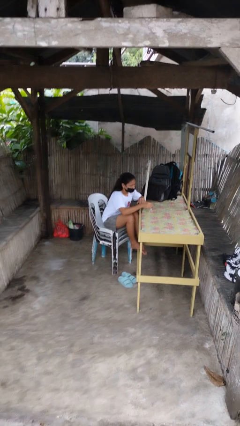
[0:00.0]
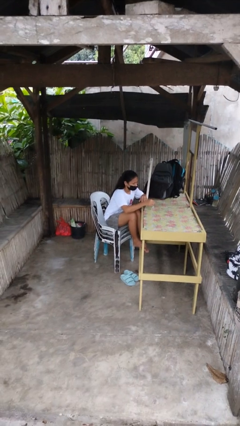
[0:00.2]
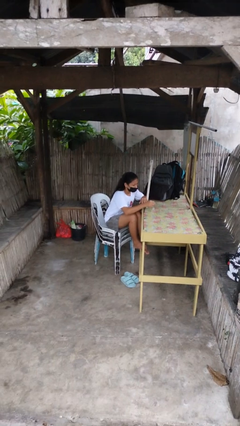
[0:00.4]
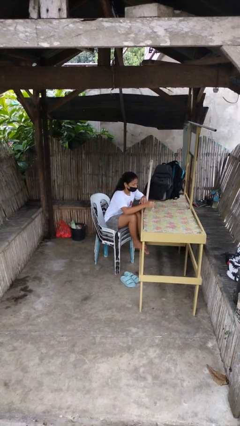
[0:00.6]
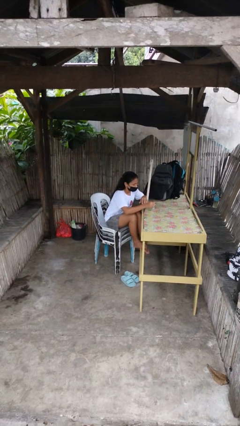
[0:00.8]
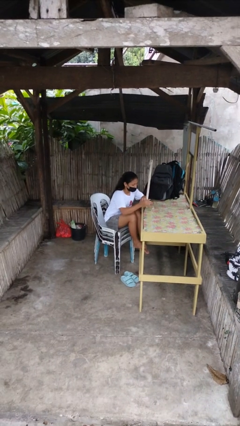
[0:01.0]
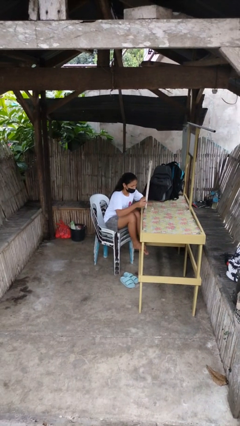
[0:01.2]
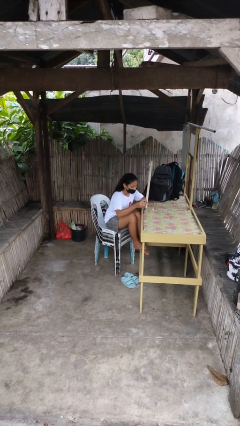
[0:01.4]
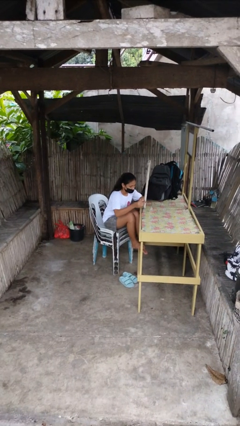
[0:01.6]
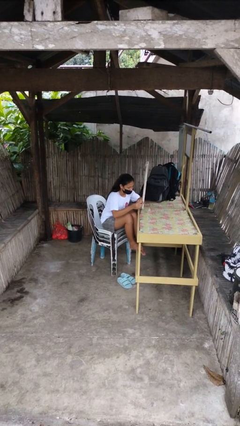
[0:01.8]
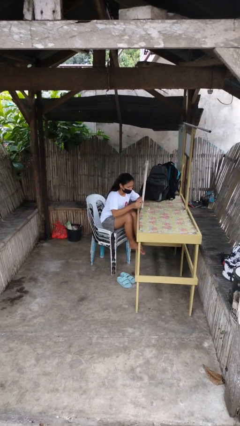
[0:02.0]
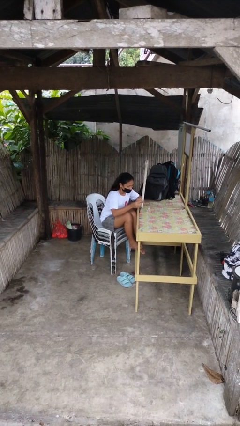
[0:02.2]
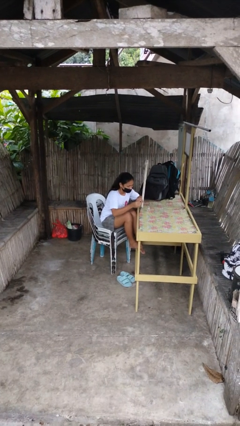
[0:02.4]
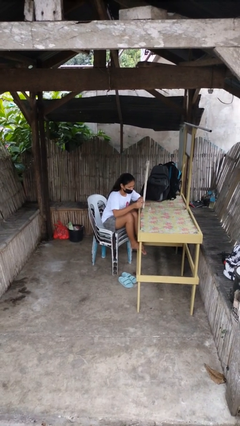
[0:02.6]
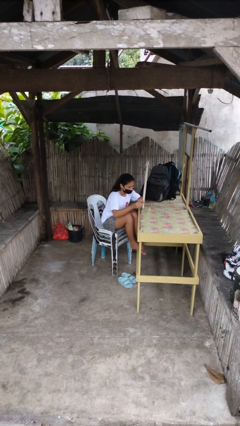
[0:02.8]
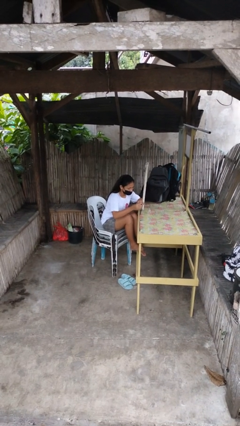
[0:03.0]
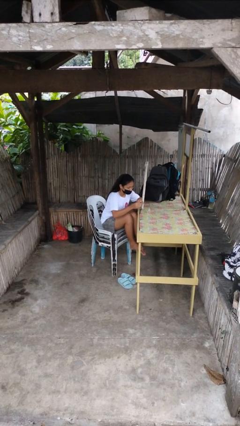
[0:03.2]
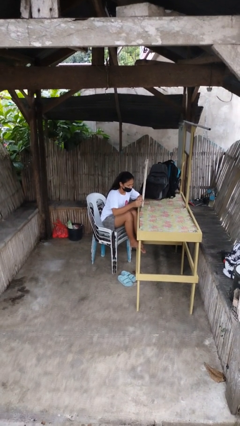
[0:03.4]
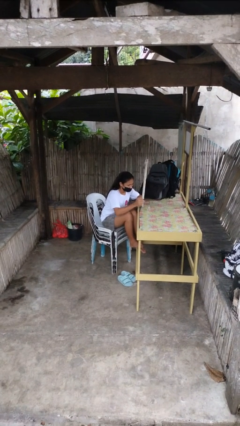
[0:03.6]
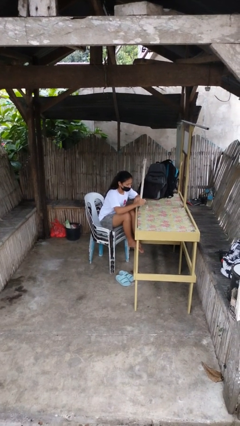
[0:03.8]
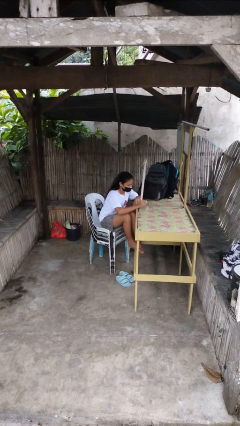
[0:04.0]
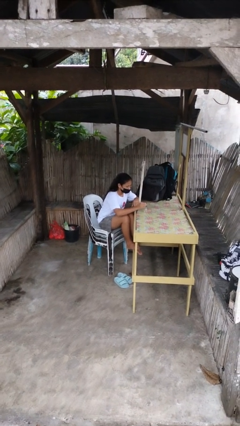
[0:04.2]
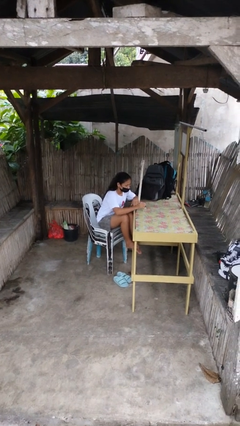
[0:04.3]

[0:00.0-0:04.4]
person paints fingernails

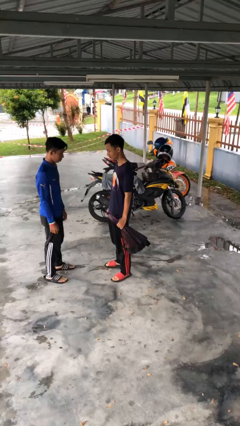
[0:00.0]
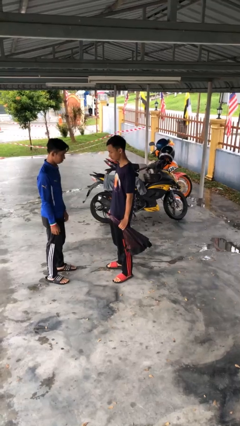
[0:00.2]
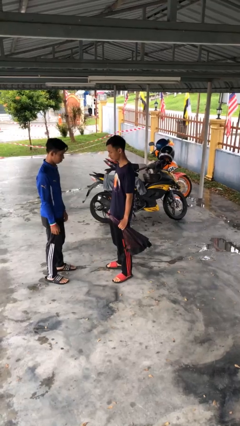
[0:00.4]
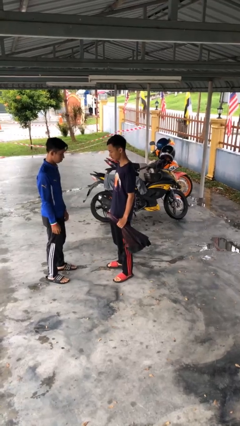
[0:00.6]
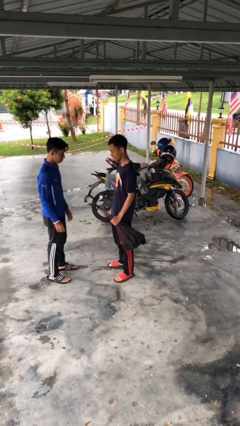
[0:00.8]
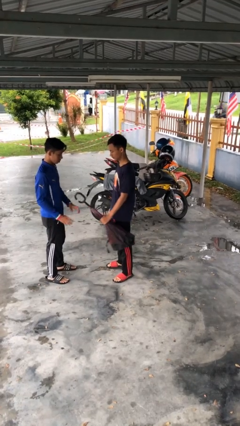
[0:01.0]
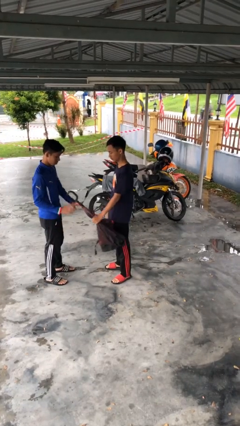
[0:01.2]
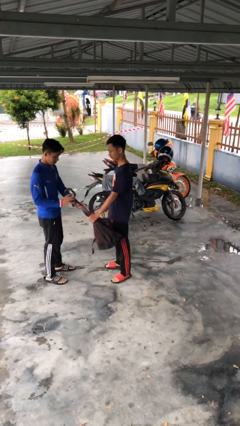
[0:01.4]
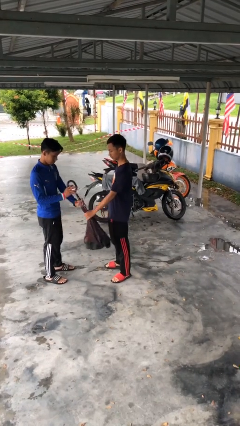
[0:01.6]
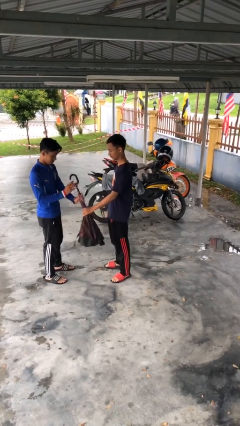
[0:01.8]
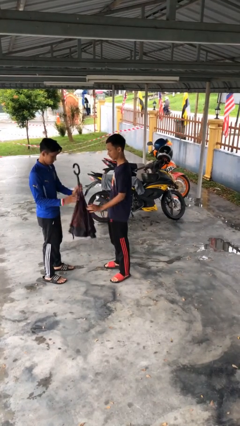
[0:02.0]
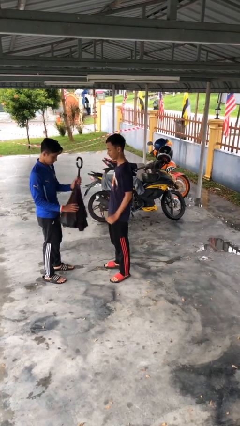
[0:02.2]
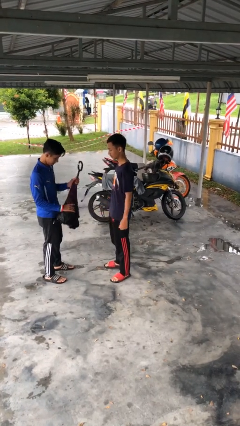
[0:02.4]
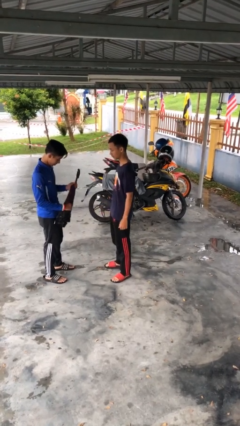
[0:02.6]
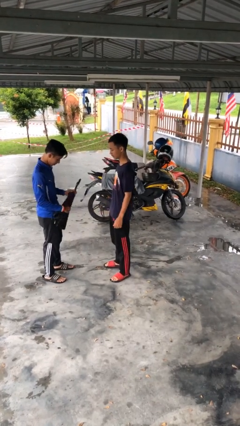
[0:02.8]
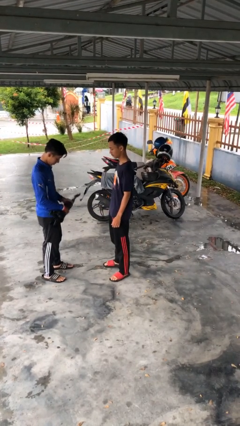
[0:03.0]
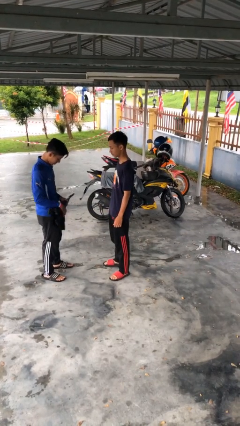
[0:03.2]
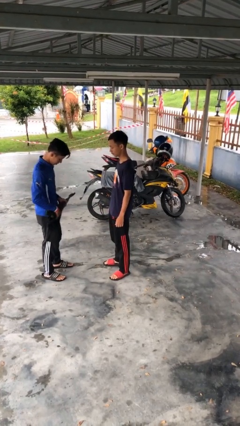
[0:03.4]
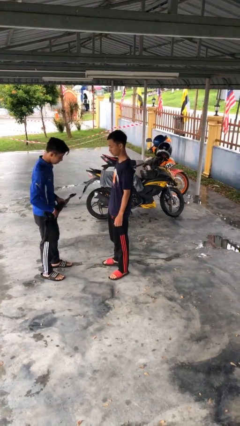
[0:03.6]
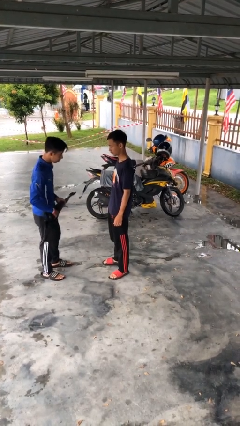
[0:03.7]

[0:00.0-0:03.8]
person transfers object to person

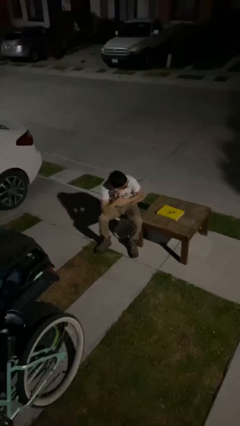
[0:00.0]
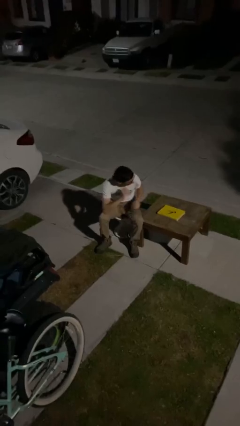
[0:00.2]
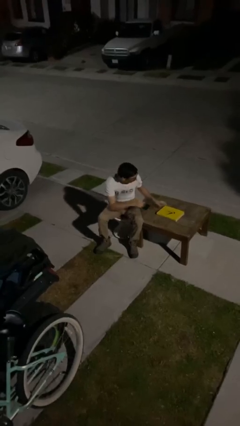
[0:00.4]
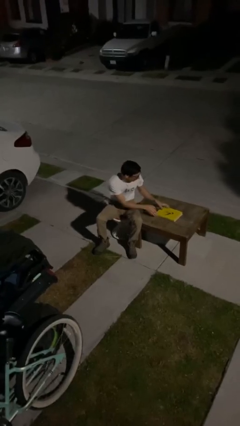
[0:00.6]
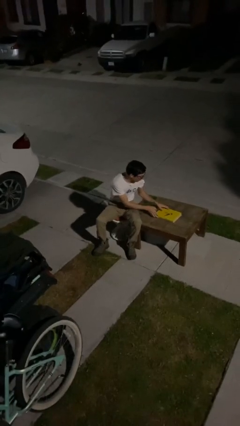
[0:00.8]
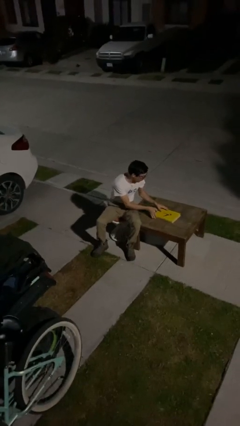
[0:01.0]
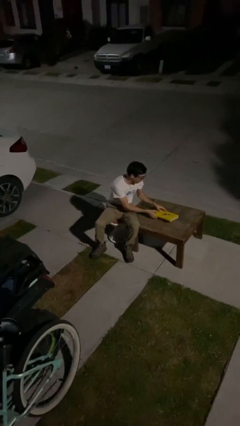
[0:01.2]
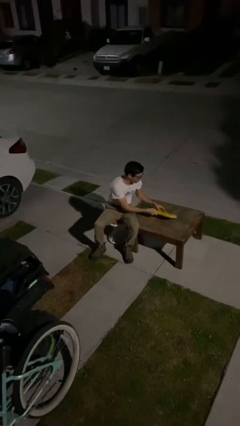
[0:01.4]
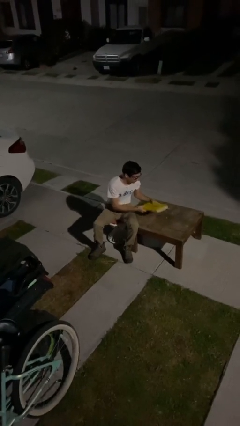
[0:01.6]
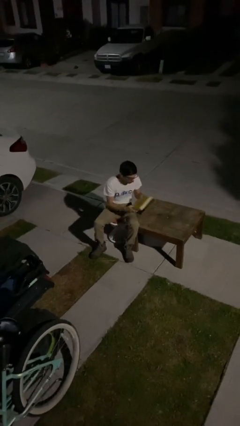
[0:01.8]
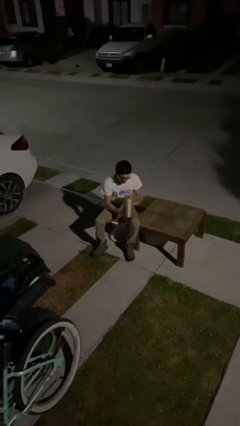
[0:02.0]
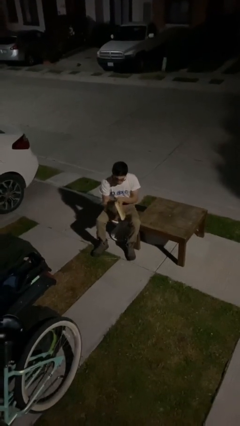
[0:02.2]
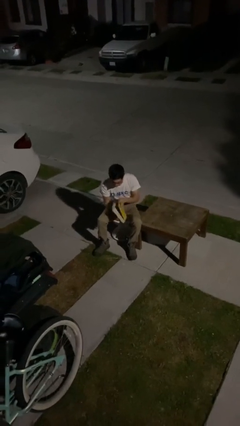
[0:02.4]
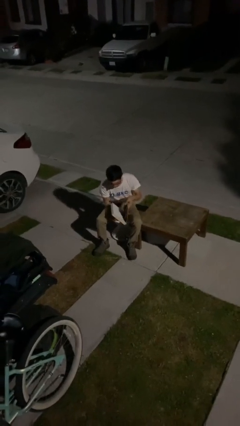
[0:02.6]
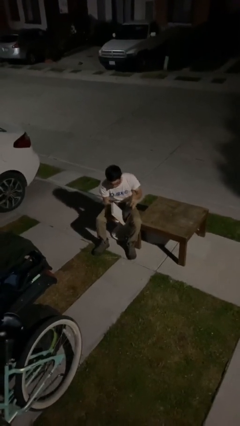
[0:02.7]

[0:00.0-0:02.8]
person picks up object from table

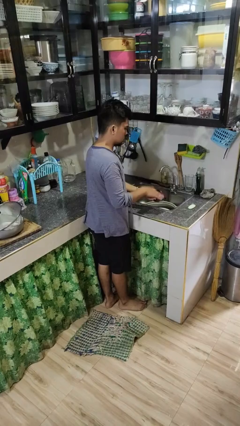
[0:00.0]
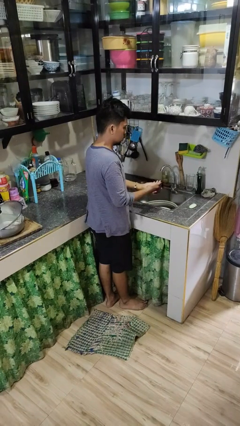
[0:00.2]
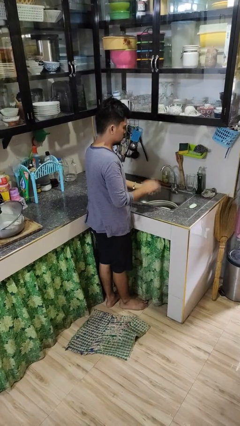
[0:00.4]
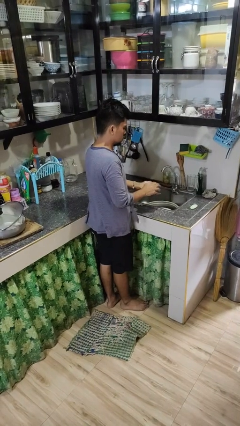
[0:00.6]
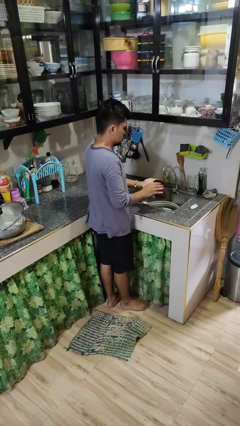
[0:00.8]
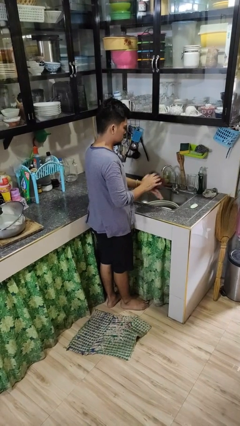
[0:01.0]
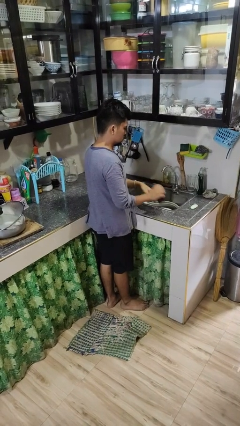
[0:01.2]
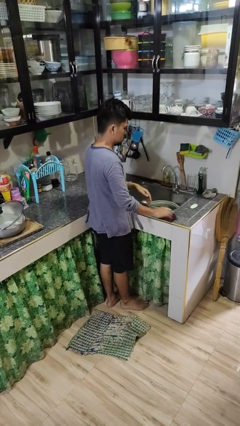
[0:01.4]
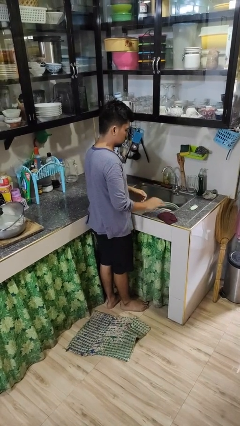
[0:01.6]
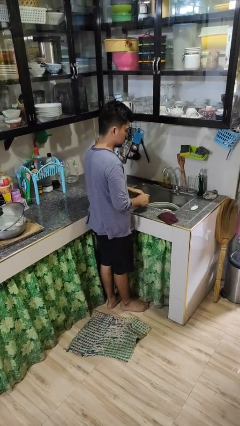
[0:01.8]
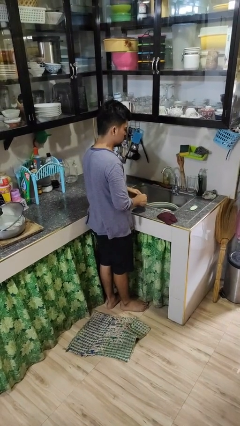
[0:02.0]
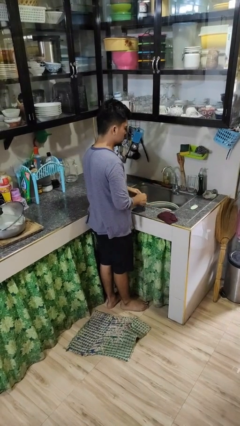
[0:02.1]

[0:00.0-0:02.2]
person dries hands with towel

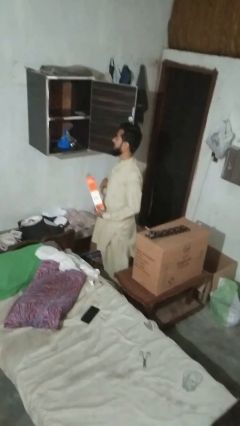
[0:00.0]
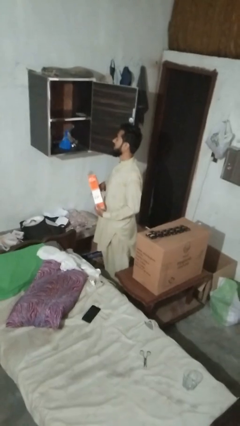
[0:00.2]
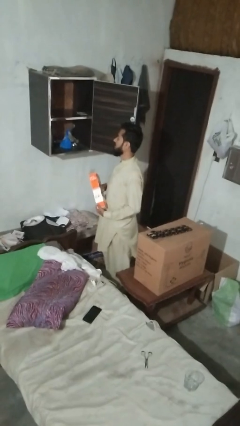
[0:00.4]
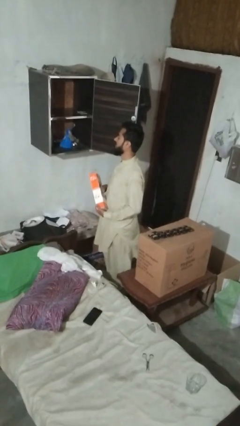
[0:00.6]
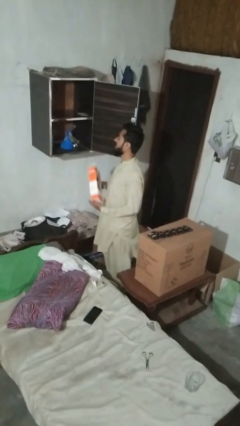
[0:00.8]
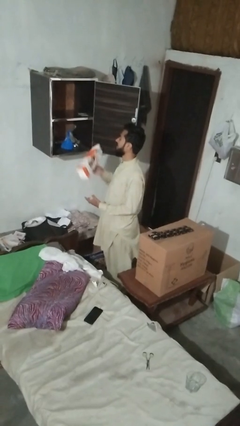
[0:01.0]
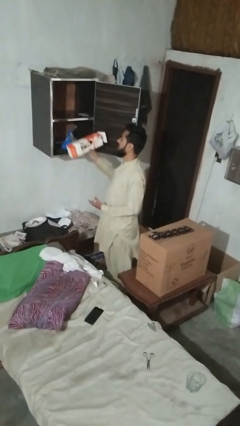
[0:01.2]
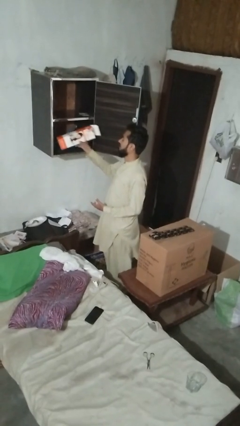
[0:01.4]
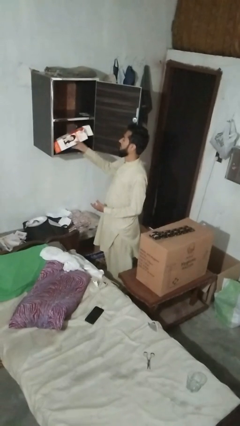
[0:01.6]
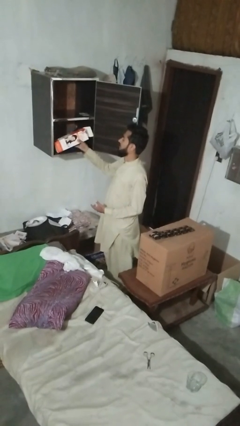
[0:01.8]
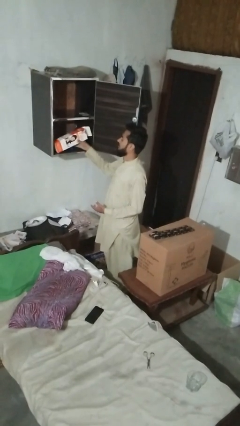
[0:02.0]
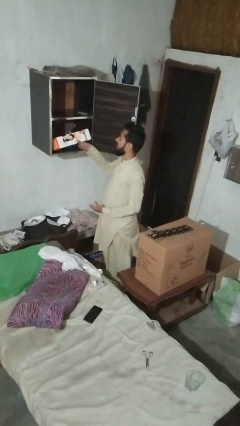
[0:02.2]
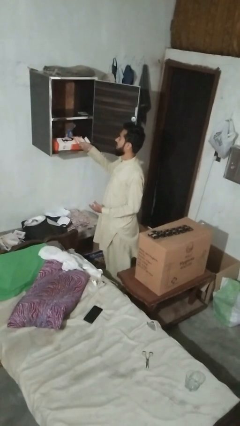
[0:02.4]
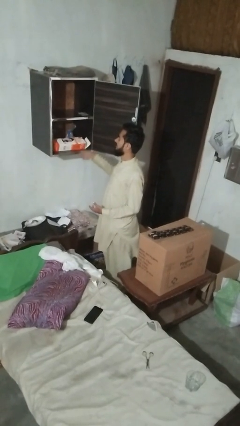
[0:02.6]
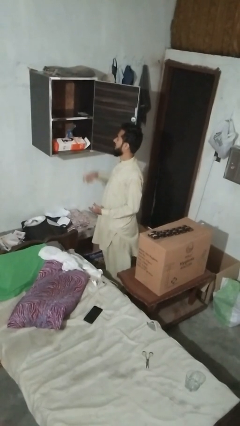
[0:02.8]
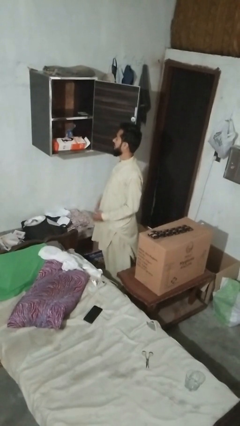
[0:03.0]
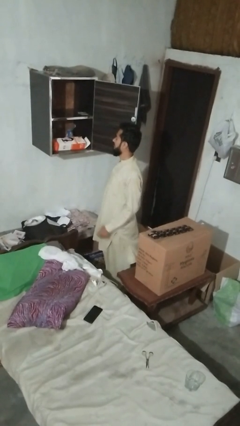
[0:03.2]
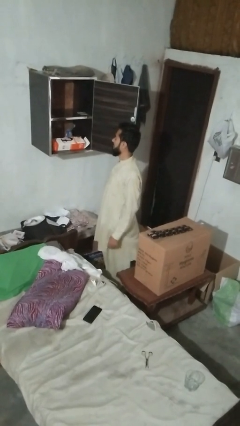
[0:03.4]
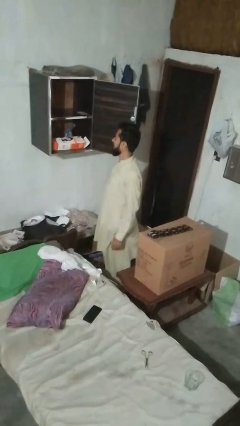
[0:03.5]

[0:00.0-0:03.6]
person puts down object into cabinet

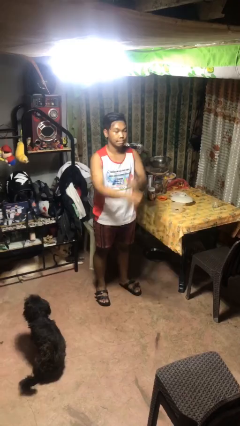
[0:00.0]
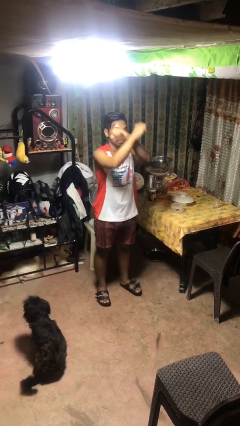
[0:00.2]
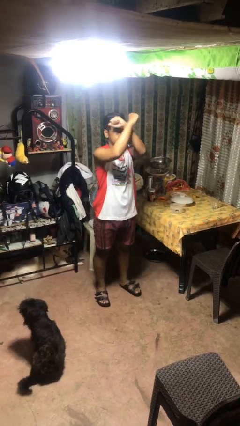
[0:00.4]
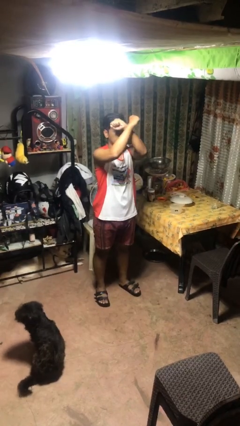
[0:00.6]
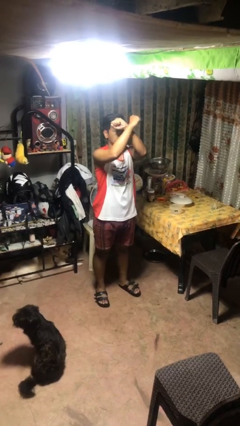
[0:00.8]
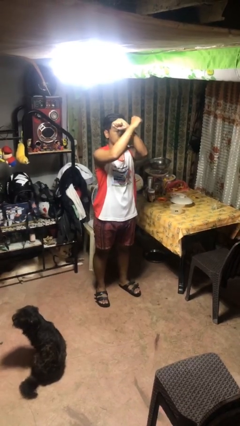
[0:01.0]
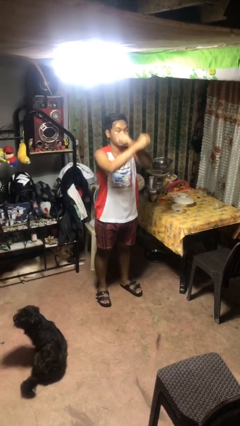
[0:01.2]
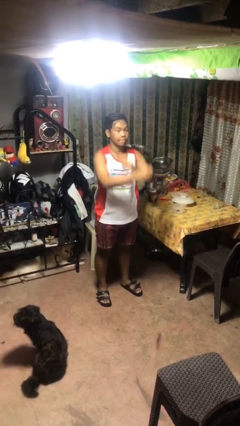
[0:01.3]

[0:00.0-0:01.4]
person gestures arms x
